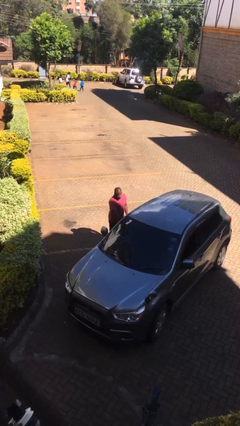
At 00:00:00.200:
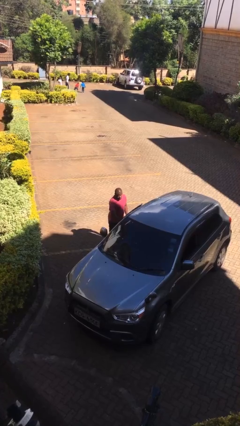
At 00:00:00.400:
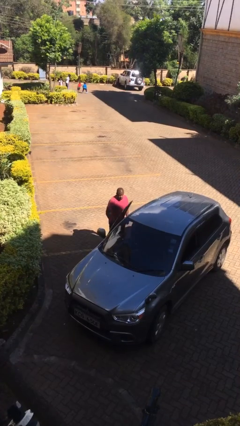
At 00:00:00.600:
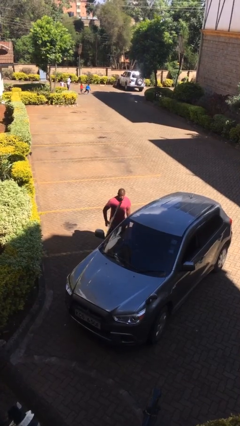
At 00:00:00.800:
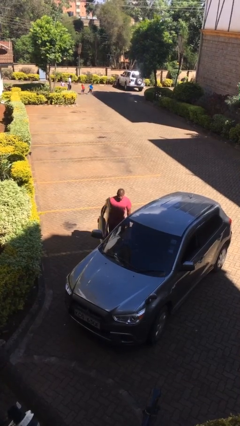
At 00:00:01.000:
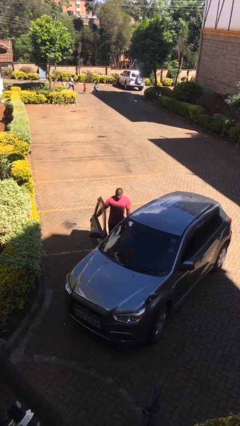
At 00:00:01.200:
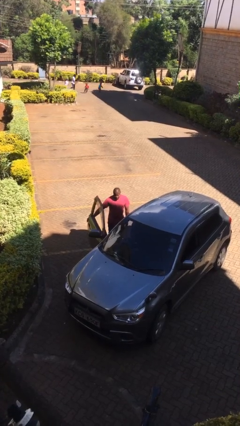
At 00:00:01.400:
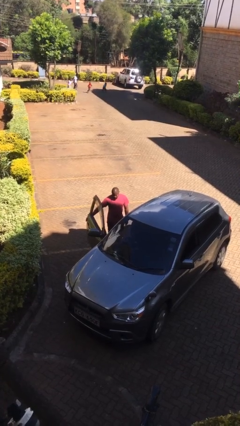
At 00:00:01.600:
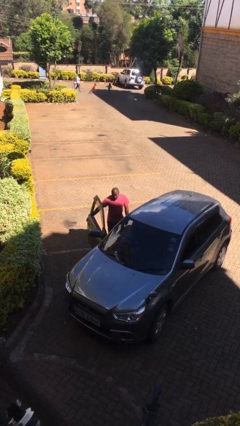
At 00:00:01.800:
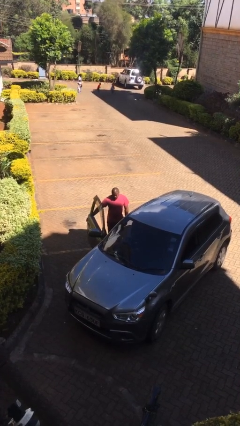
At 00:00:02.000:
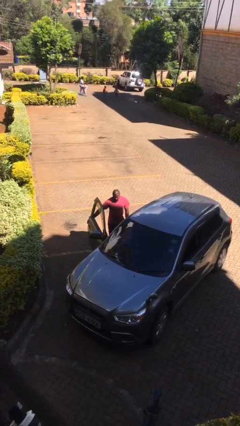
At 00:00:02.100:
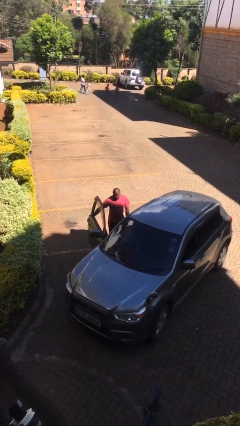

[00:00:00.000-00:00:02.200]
person opens car door

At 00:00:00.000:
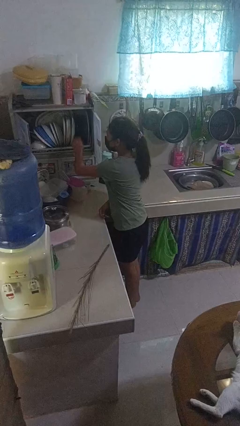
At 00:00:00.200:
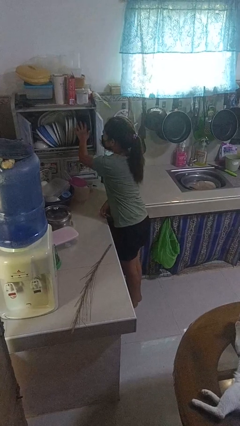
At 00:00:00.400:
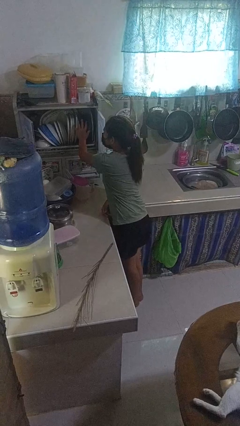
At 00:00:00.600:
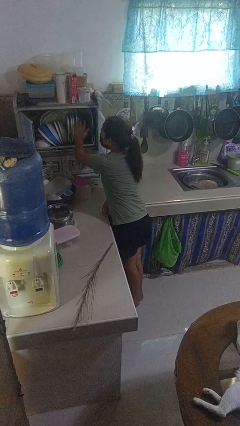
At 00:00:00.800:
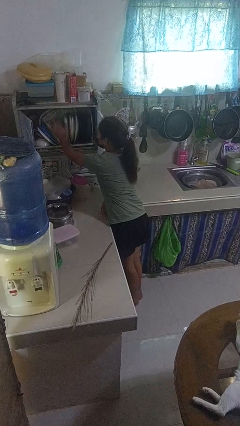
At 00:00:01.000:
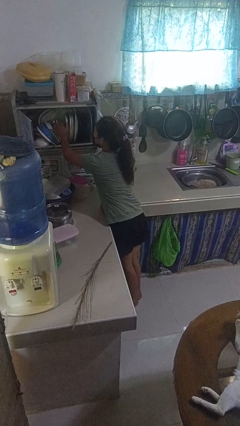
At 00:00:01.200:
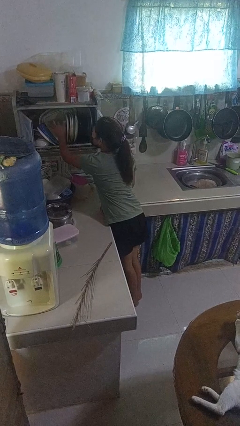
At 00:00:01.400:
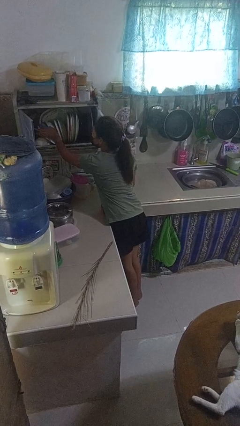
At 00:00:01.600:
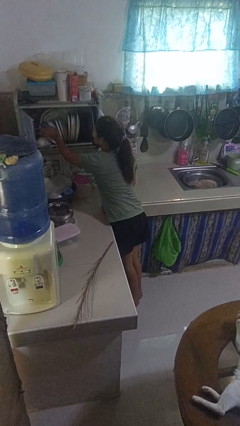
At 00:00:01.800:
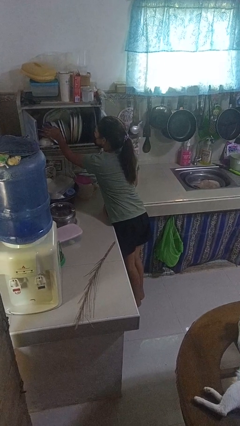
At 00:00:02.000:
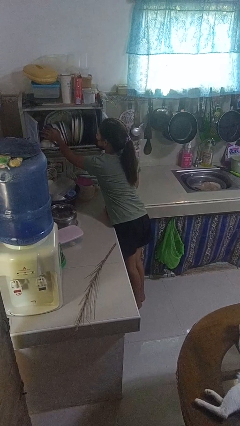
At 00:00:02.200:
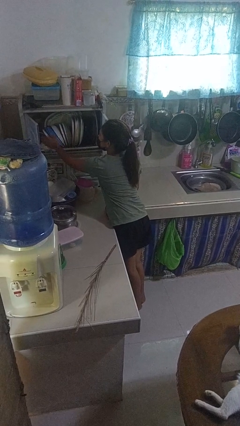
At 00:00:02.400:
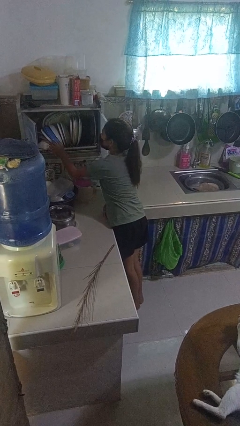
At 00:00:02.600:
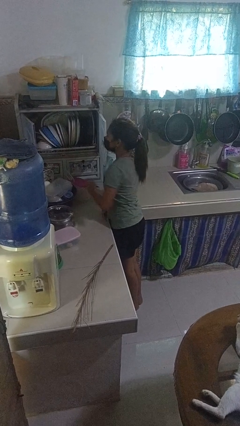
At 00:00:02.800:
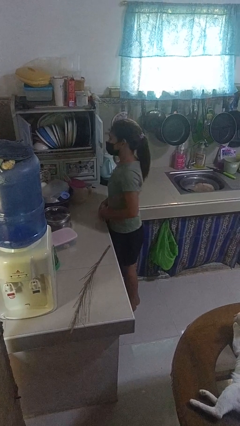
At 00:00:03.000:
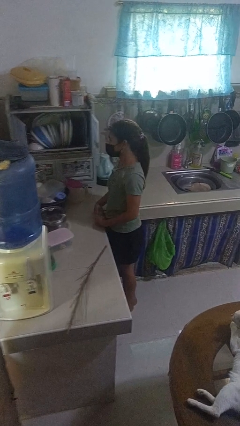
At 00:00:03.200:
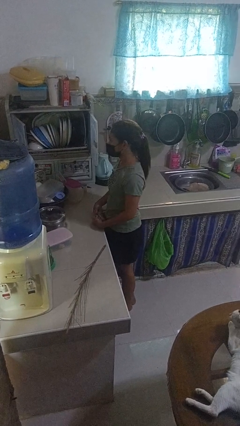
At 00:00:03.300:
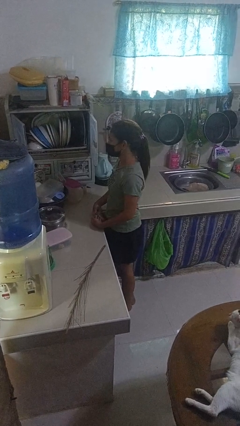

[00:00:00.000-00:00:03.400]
person searches in kitchen drawer

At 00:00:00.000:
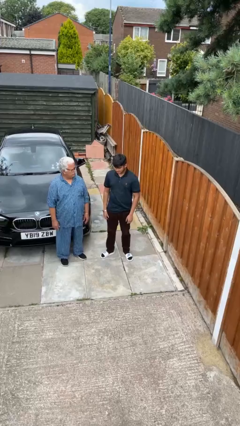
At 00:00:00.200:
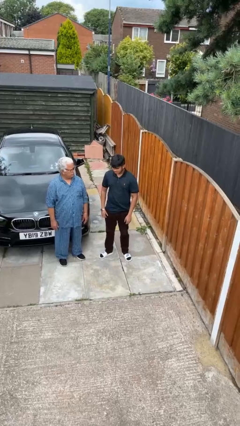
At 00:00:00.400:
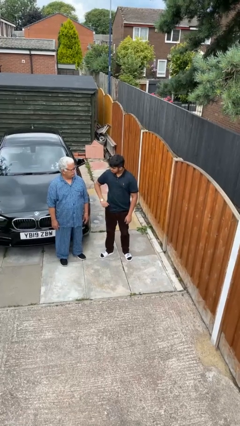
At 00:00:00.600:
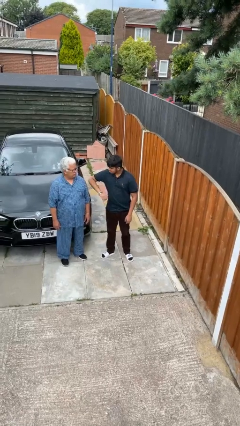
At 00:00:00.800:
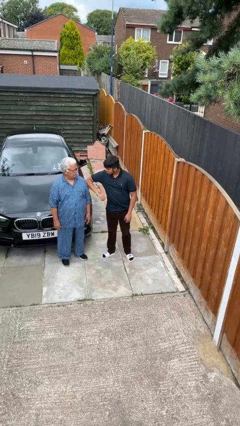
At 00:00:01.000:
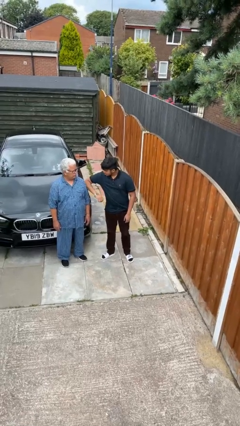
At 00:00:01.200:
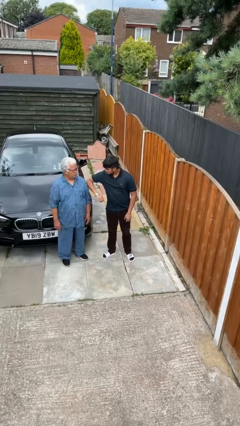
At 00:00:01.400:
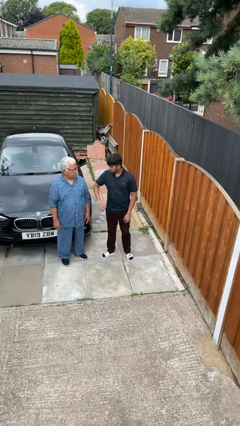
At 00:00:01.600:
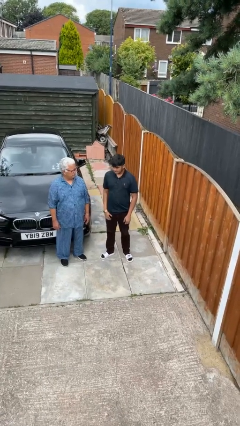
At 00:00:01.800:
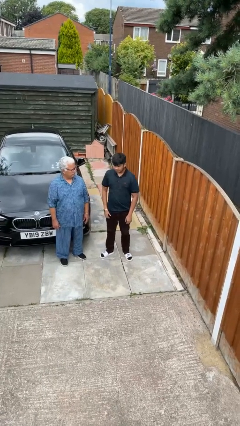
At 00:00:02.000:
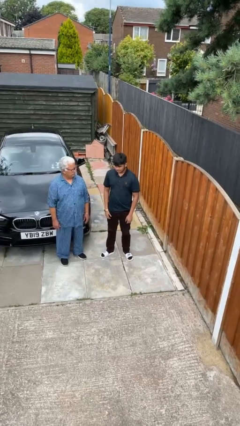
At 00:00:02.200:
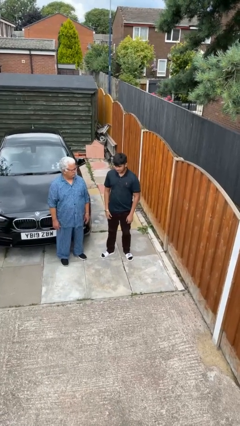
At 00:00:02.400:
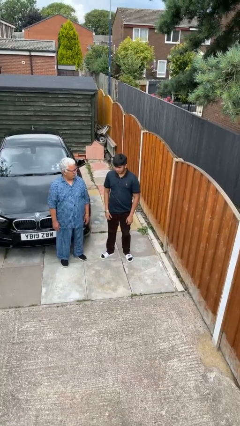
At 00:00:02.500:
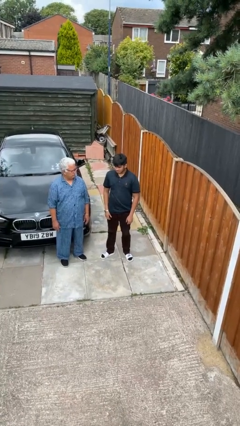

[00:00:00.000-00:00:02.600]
person nudges person with elbow

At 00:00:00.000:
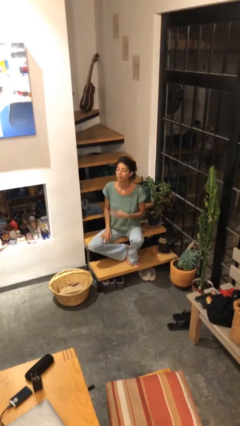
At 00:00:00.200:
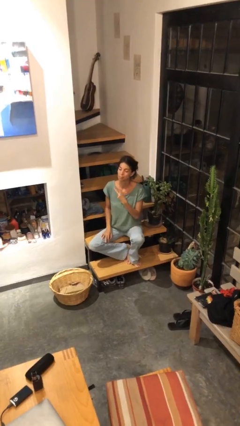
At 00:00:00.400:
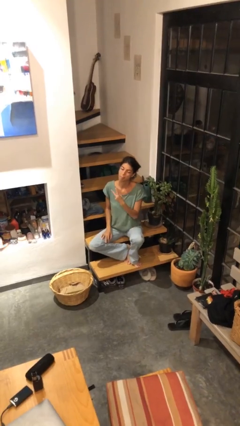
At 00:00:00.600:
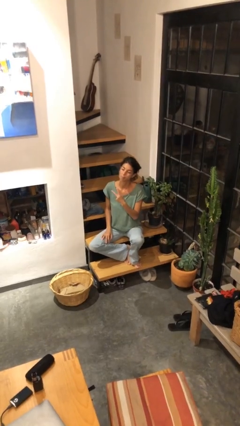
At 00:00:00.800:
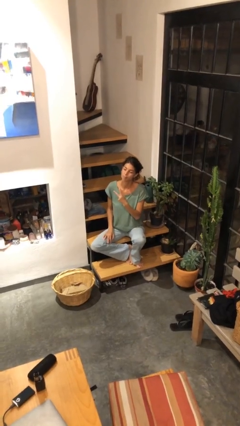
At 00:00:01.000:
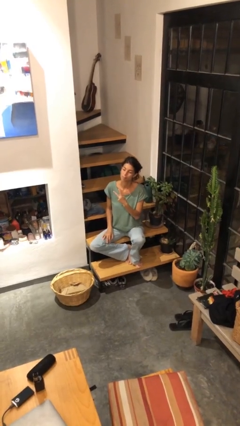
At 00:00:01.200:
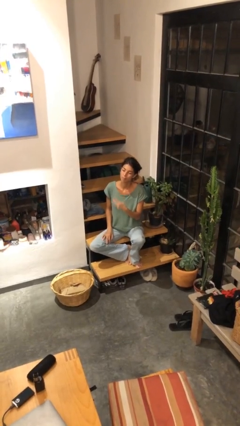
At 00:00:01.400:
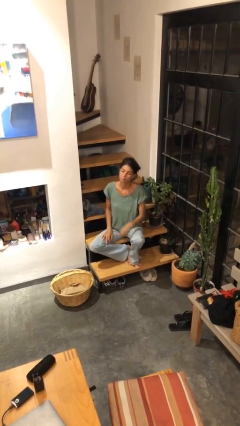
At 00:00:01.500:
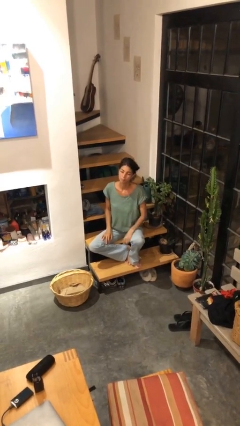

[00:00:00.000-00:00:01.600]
person gestures peace

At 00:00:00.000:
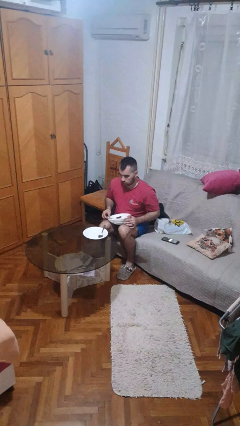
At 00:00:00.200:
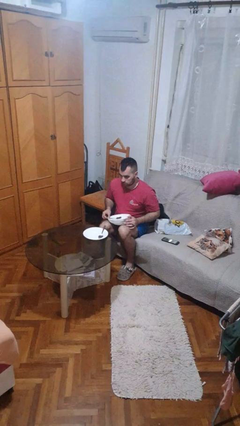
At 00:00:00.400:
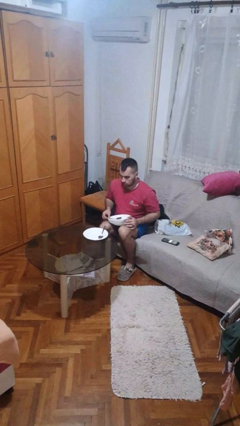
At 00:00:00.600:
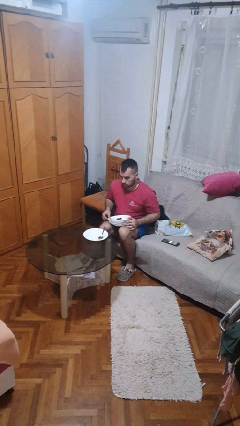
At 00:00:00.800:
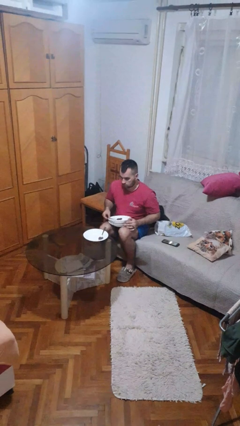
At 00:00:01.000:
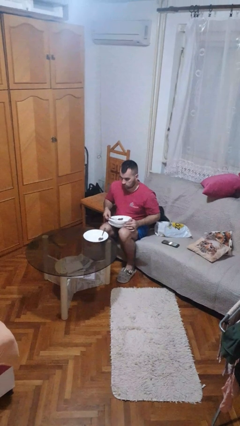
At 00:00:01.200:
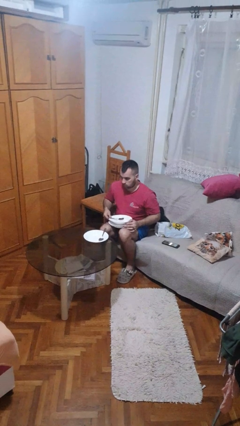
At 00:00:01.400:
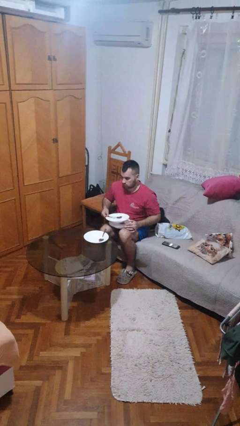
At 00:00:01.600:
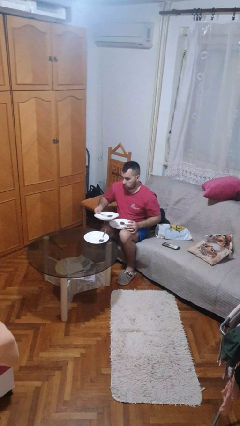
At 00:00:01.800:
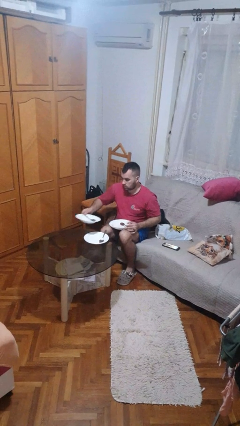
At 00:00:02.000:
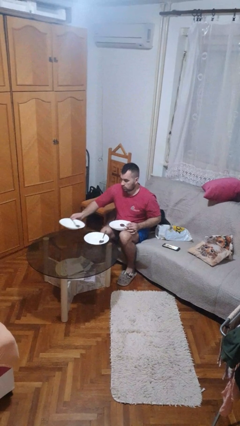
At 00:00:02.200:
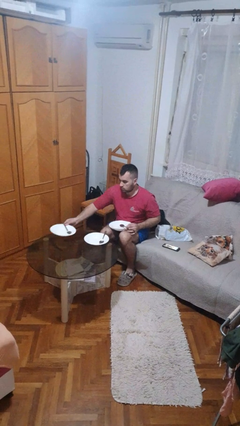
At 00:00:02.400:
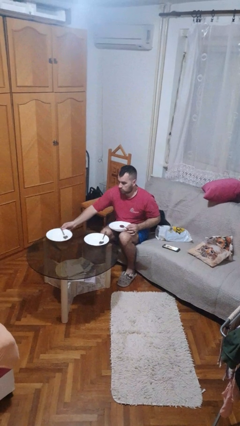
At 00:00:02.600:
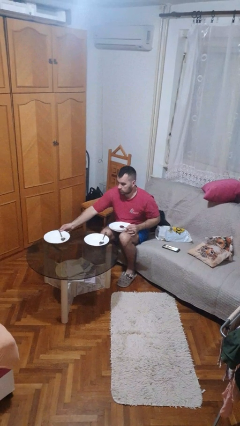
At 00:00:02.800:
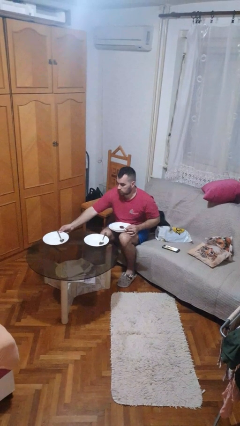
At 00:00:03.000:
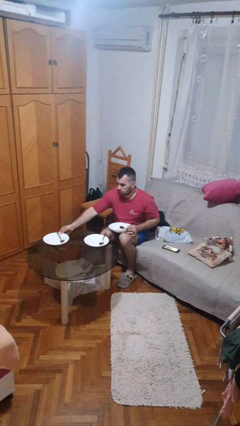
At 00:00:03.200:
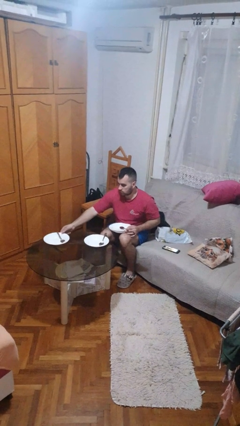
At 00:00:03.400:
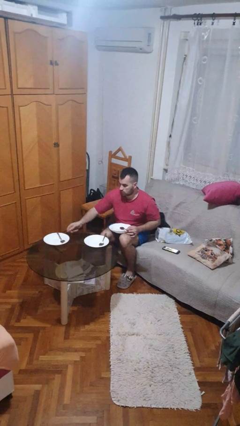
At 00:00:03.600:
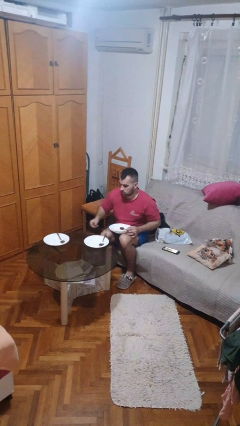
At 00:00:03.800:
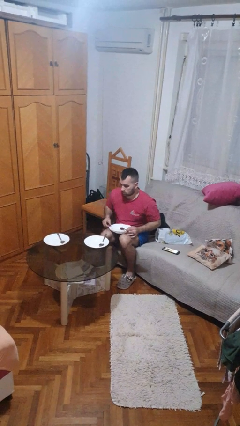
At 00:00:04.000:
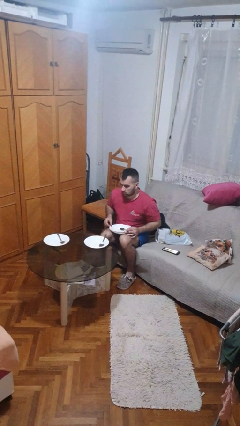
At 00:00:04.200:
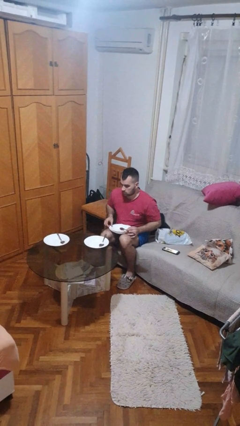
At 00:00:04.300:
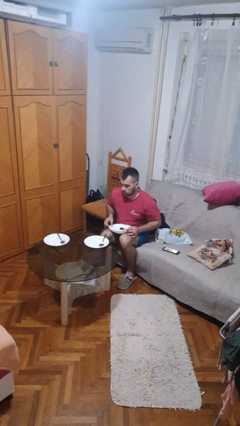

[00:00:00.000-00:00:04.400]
person sets table

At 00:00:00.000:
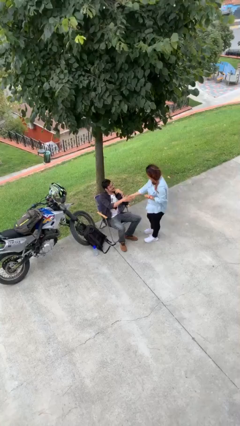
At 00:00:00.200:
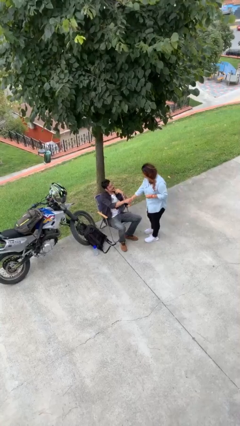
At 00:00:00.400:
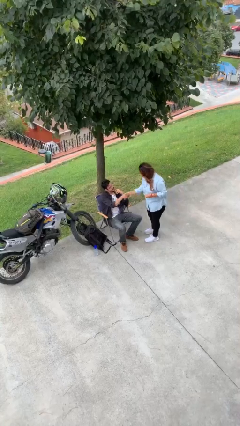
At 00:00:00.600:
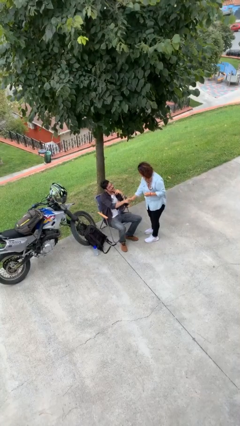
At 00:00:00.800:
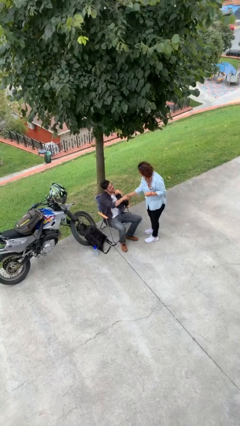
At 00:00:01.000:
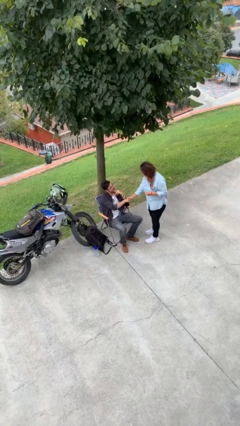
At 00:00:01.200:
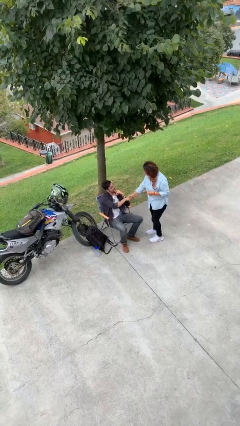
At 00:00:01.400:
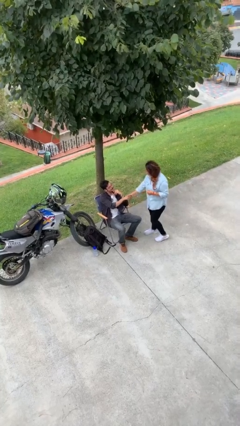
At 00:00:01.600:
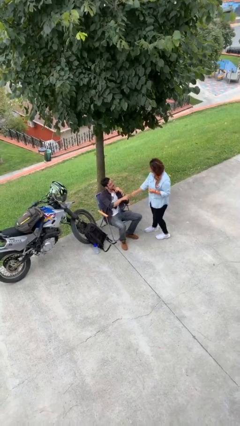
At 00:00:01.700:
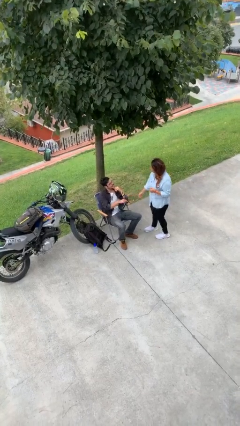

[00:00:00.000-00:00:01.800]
person shakes hand

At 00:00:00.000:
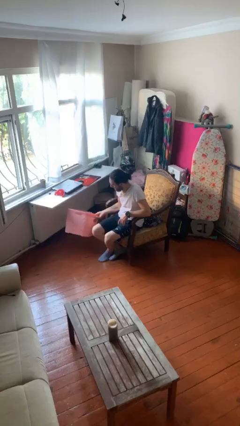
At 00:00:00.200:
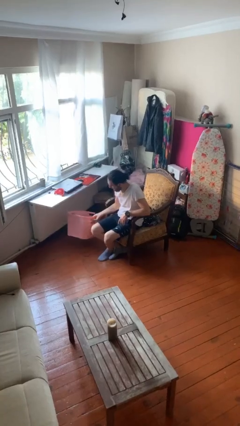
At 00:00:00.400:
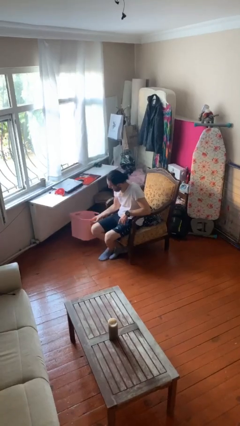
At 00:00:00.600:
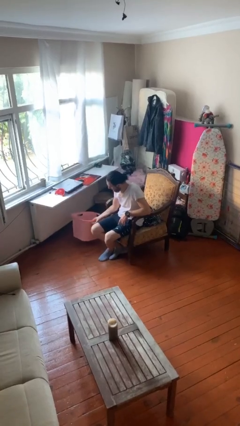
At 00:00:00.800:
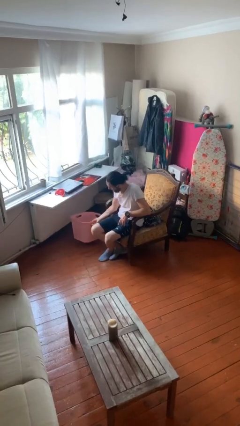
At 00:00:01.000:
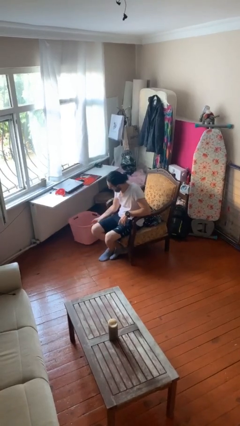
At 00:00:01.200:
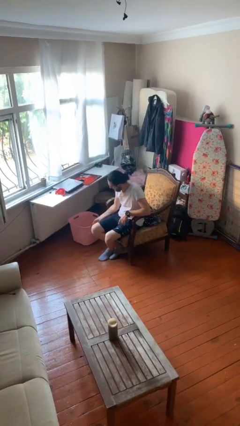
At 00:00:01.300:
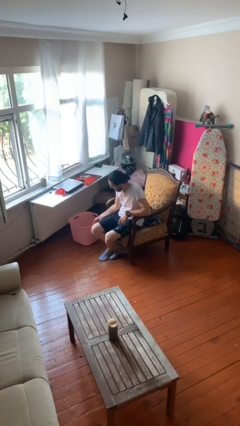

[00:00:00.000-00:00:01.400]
person puts down object on floor
